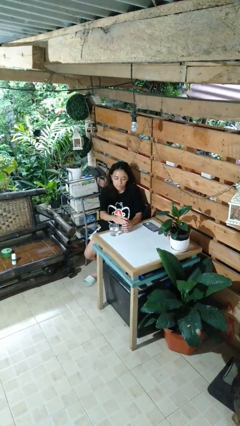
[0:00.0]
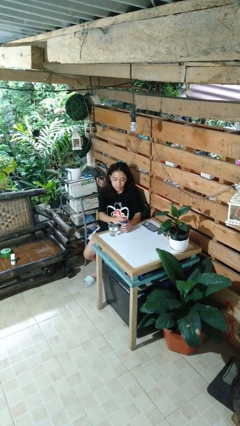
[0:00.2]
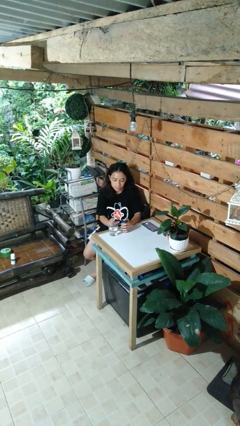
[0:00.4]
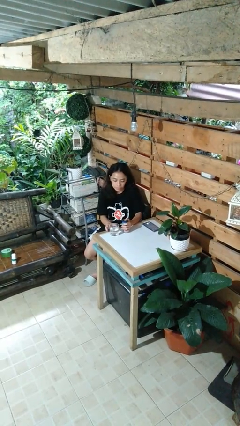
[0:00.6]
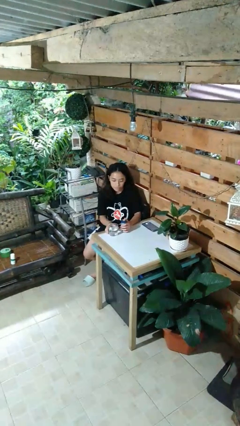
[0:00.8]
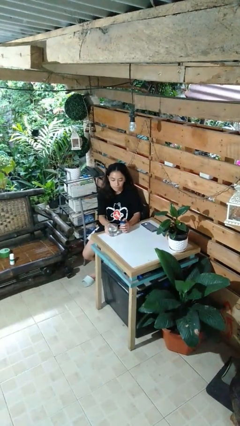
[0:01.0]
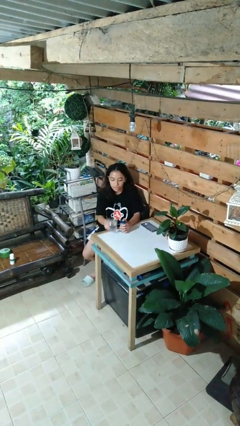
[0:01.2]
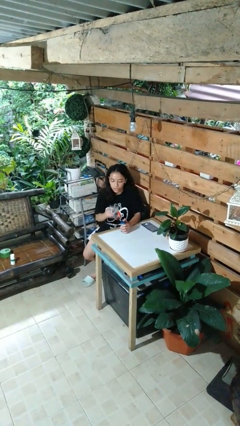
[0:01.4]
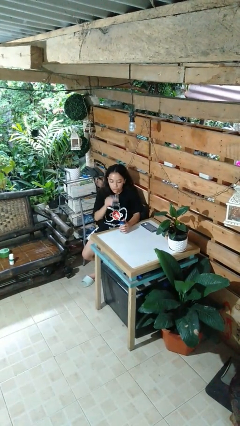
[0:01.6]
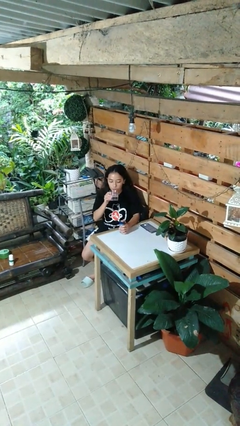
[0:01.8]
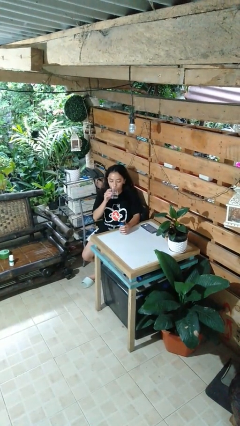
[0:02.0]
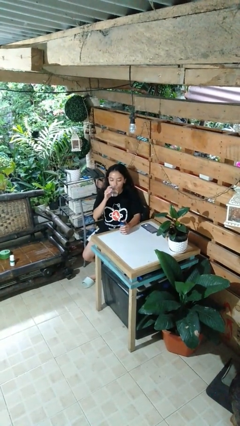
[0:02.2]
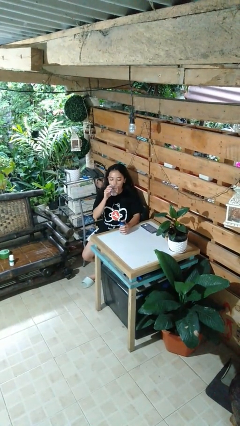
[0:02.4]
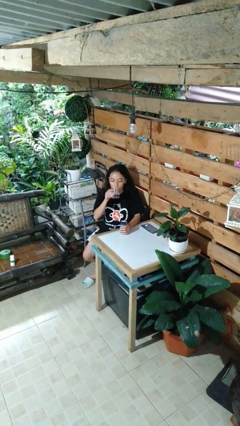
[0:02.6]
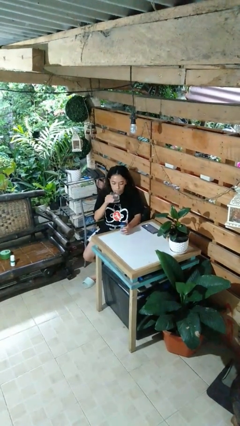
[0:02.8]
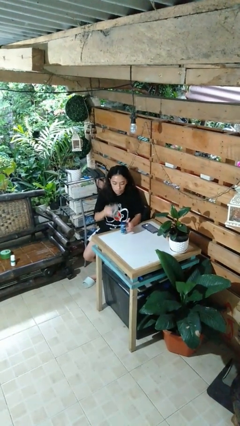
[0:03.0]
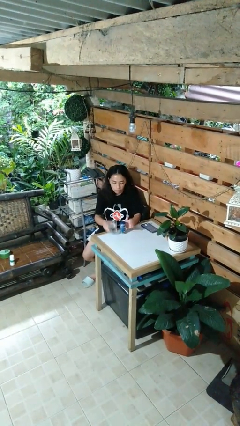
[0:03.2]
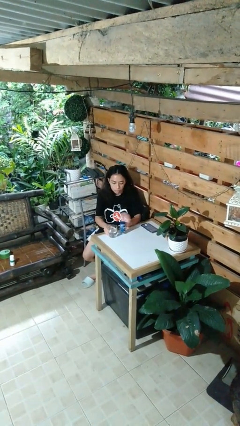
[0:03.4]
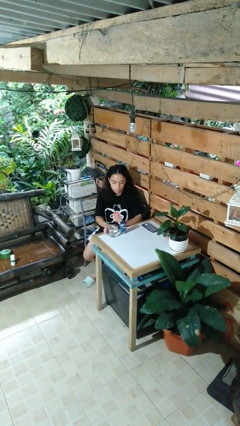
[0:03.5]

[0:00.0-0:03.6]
person drinks from cup

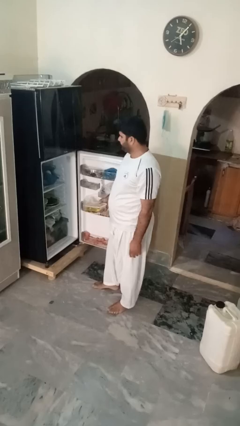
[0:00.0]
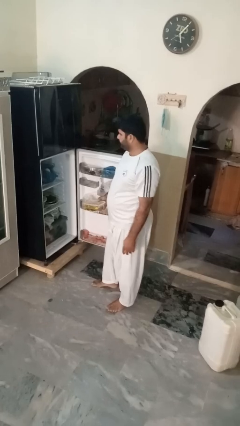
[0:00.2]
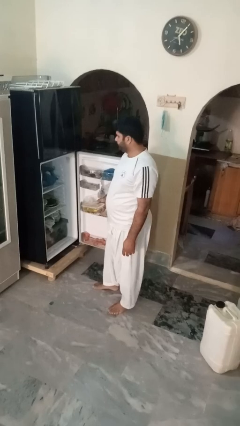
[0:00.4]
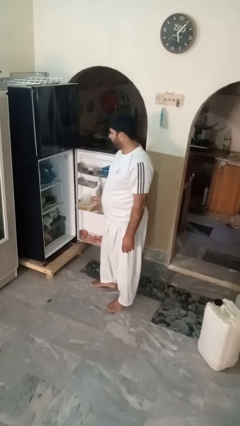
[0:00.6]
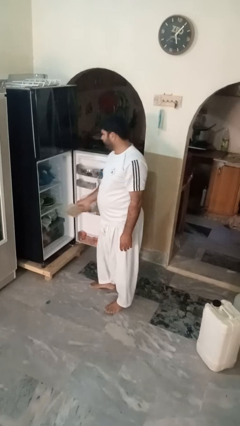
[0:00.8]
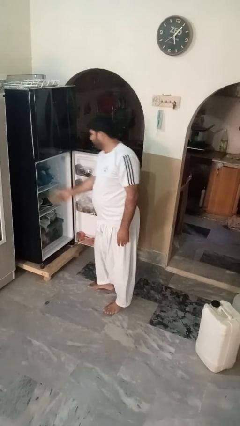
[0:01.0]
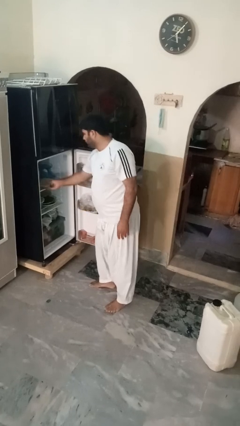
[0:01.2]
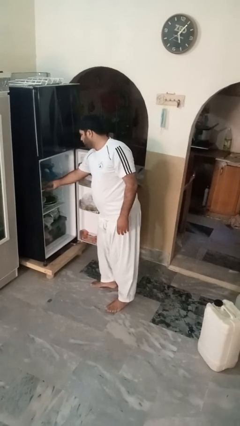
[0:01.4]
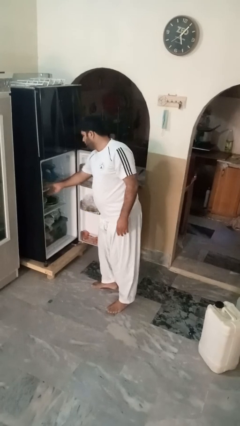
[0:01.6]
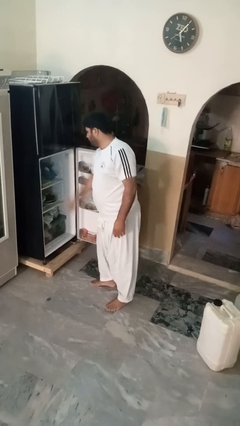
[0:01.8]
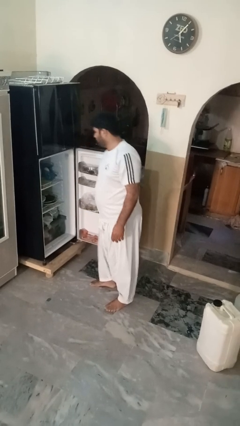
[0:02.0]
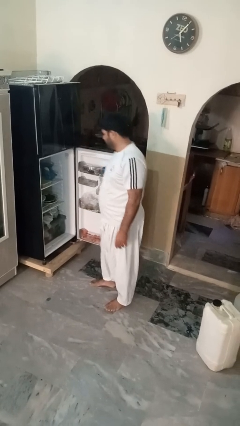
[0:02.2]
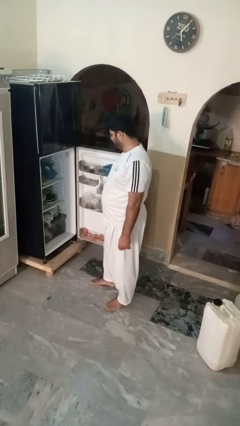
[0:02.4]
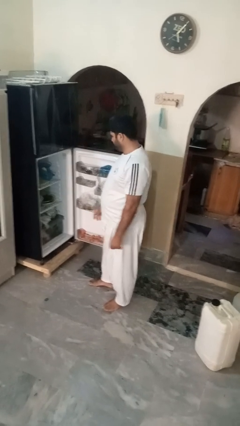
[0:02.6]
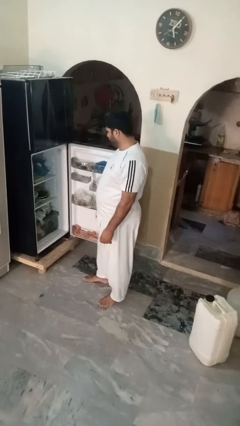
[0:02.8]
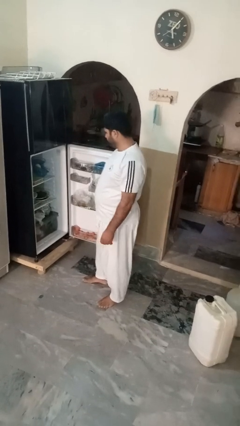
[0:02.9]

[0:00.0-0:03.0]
person puts object into refrigerator

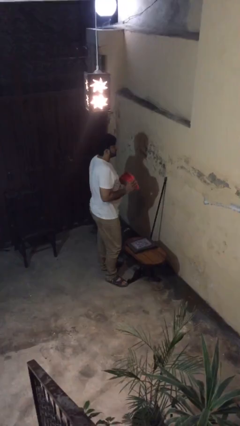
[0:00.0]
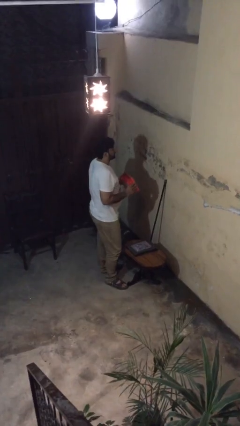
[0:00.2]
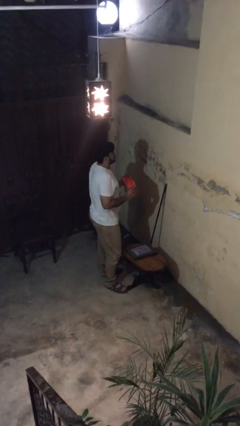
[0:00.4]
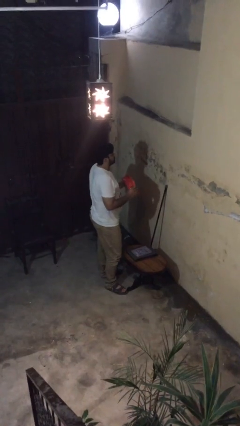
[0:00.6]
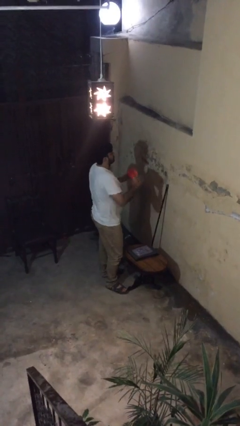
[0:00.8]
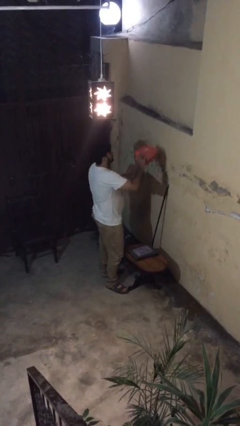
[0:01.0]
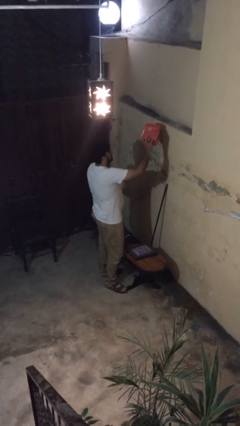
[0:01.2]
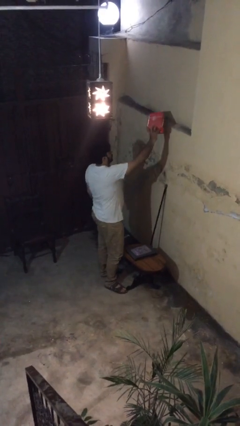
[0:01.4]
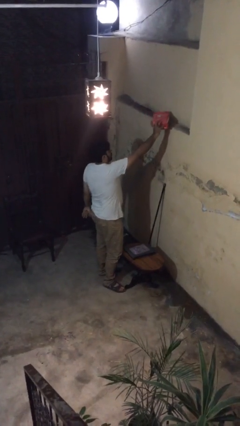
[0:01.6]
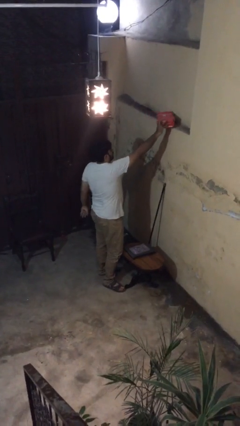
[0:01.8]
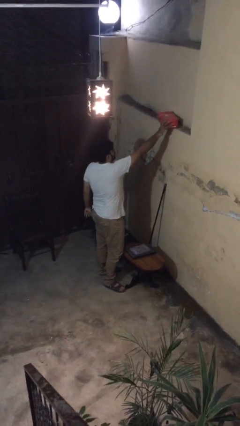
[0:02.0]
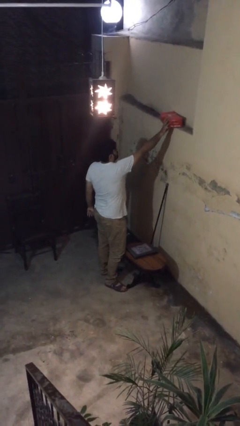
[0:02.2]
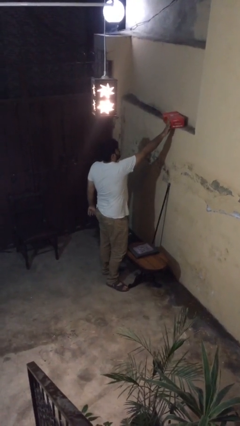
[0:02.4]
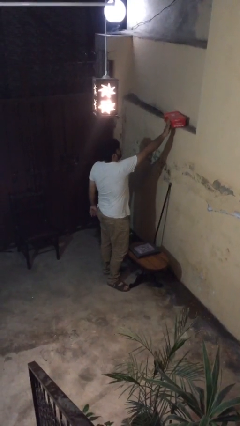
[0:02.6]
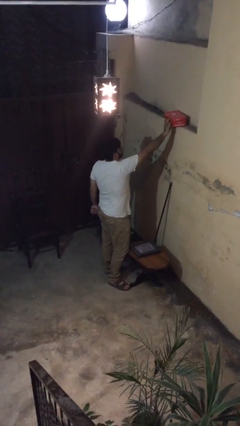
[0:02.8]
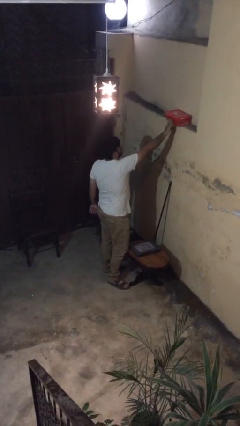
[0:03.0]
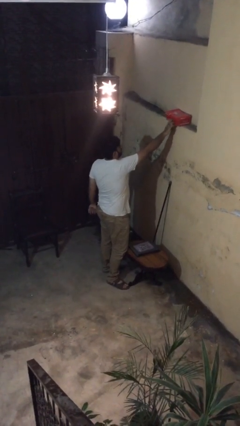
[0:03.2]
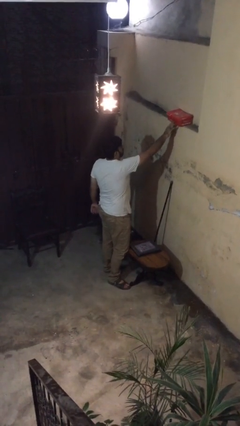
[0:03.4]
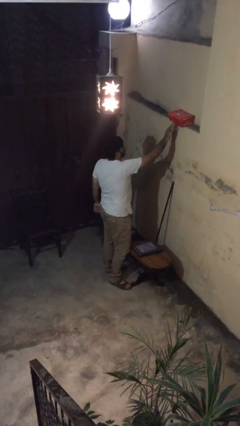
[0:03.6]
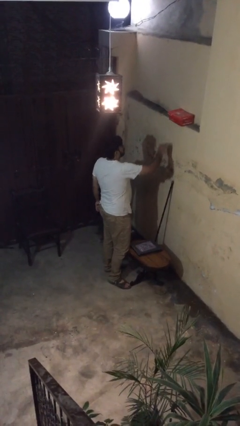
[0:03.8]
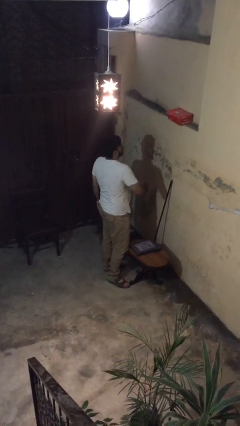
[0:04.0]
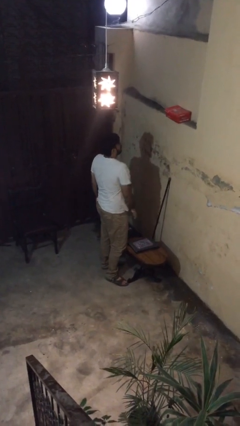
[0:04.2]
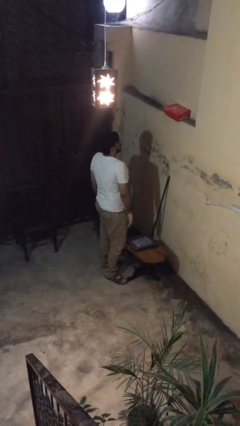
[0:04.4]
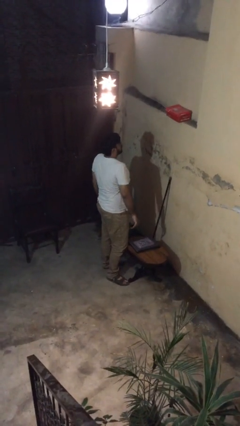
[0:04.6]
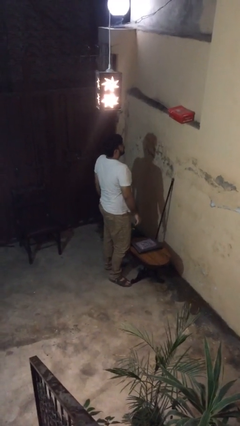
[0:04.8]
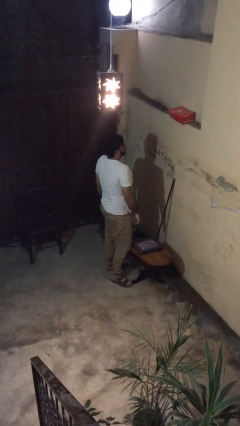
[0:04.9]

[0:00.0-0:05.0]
person puts down object on shelf

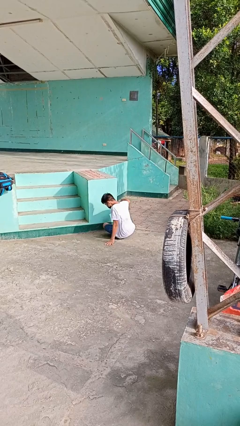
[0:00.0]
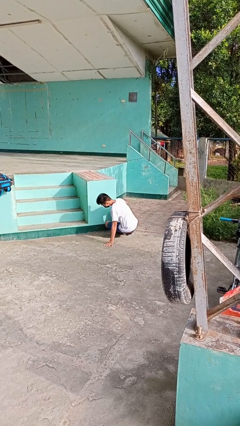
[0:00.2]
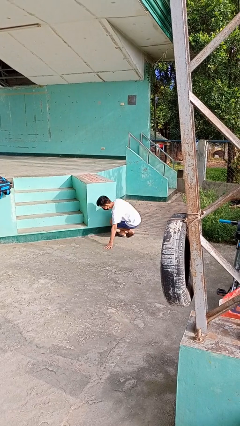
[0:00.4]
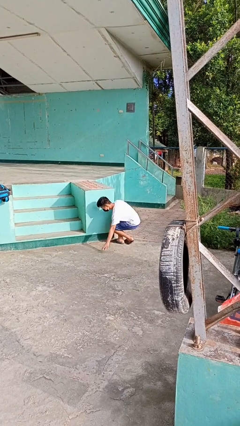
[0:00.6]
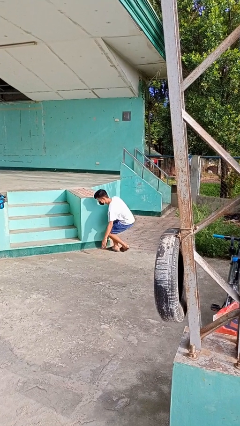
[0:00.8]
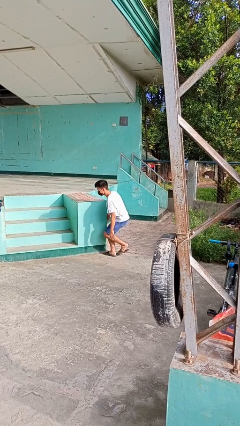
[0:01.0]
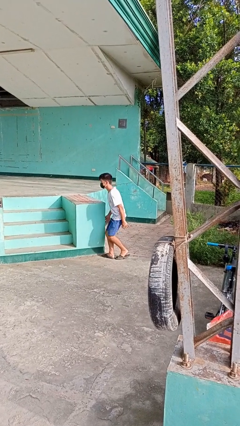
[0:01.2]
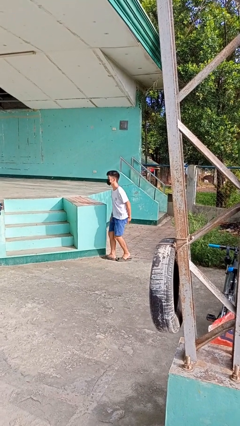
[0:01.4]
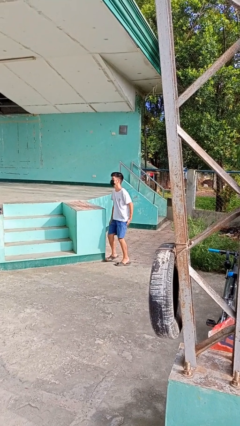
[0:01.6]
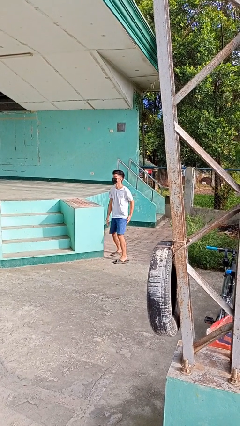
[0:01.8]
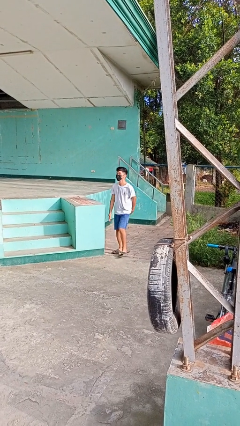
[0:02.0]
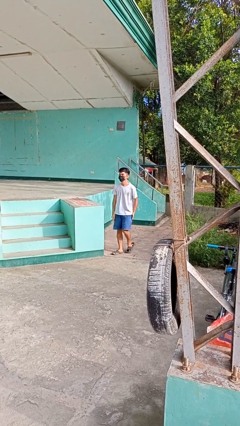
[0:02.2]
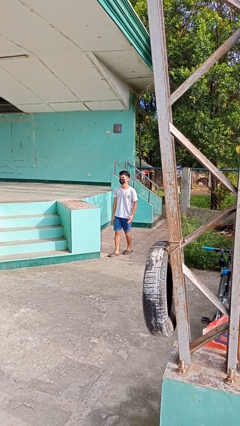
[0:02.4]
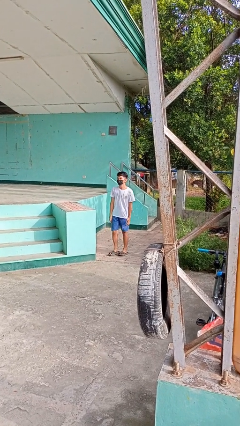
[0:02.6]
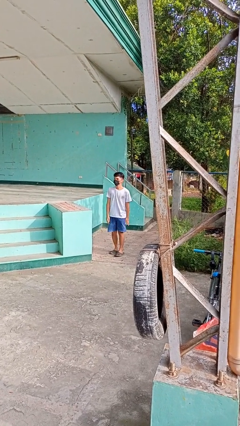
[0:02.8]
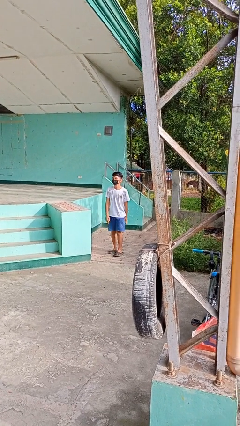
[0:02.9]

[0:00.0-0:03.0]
person stands up from floor

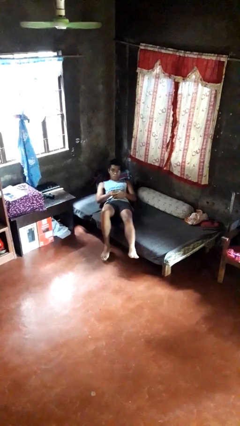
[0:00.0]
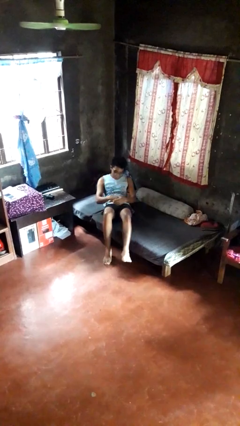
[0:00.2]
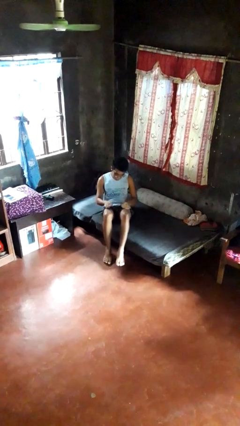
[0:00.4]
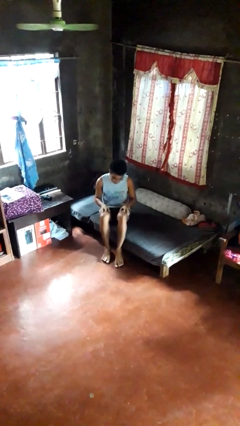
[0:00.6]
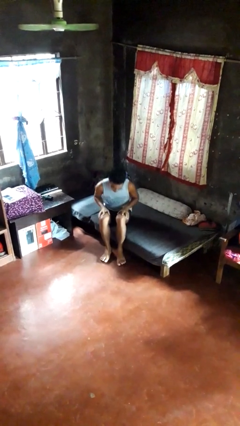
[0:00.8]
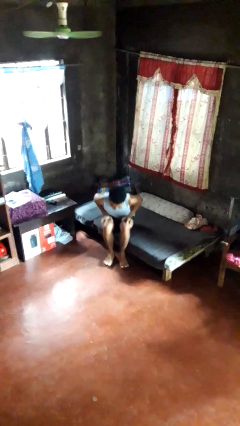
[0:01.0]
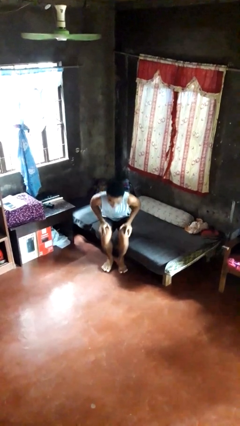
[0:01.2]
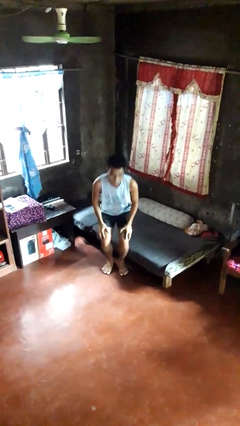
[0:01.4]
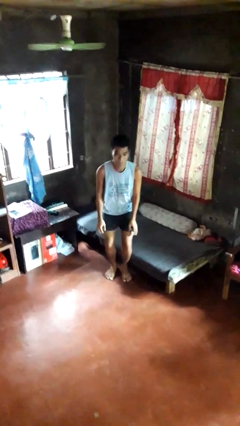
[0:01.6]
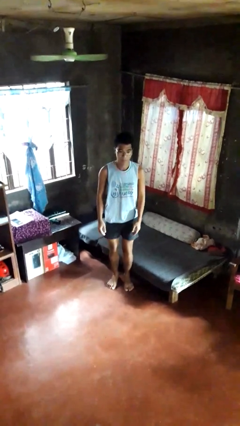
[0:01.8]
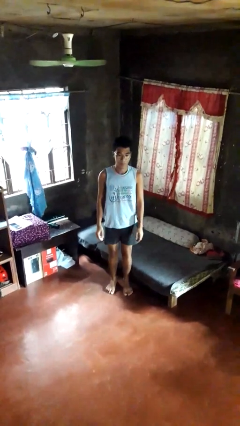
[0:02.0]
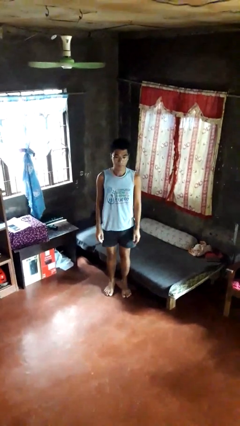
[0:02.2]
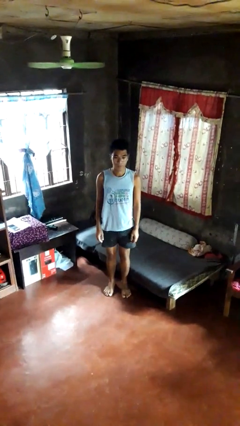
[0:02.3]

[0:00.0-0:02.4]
person stands up

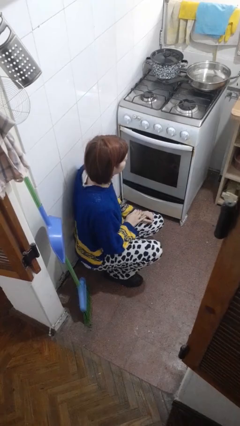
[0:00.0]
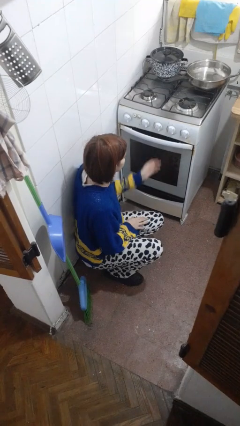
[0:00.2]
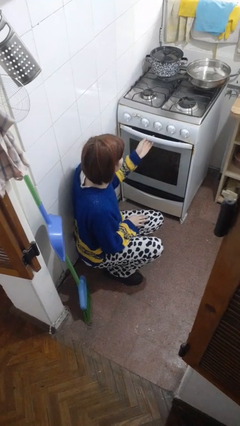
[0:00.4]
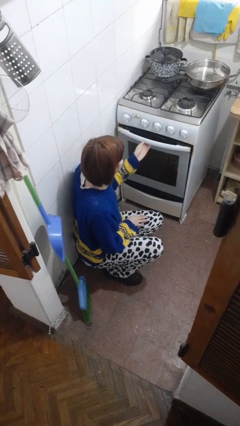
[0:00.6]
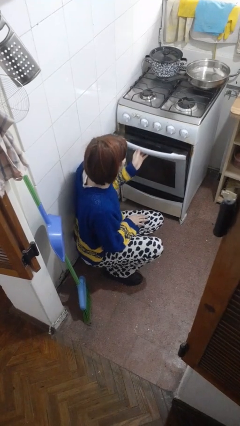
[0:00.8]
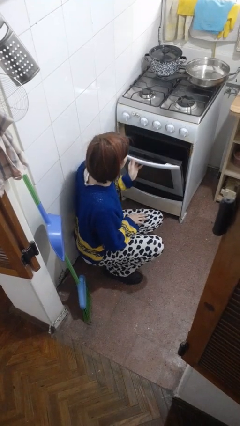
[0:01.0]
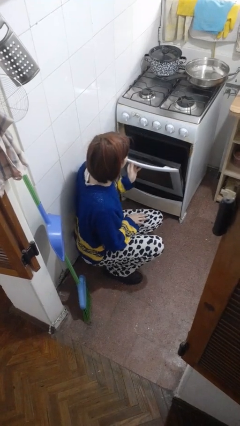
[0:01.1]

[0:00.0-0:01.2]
person opens oven door
